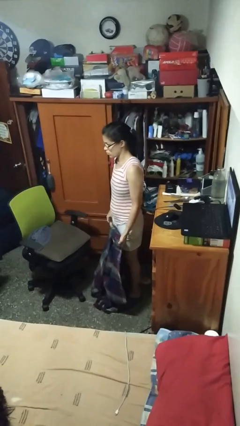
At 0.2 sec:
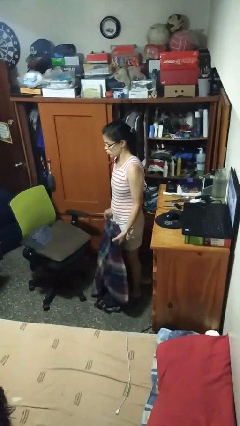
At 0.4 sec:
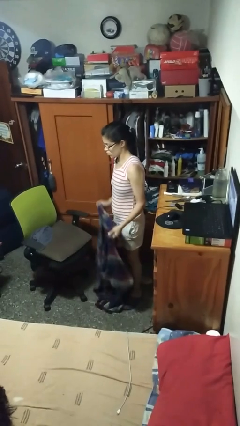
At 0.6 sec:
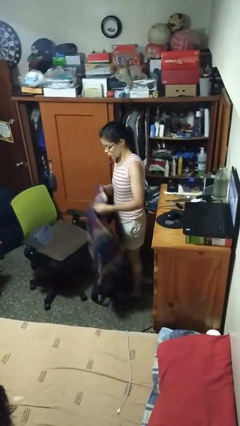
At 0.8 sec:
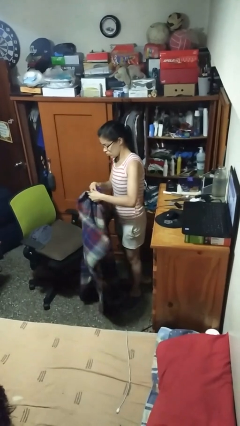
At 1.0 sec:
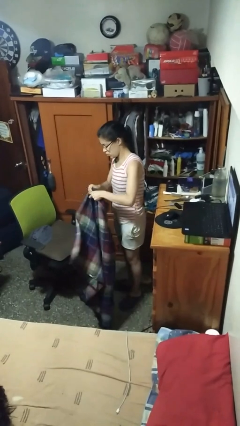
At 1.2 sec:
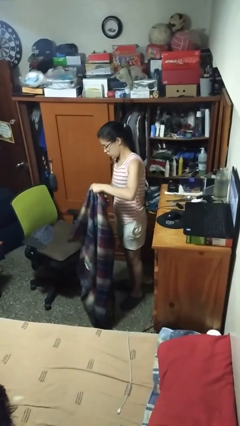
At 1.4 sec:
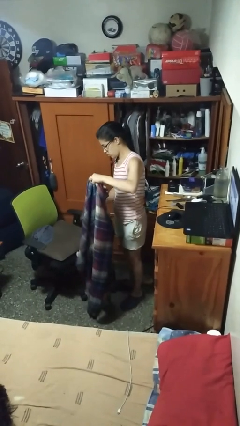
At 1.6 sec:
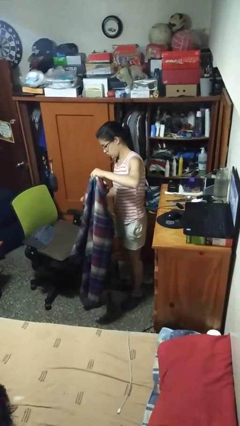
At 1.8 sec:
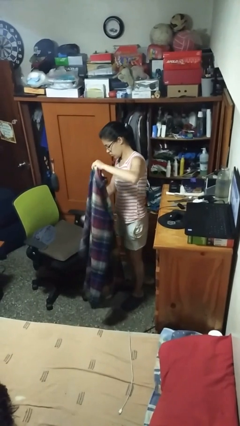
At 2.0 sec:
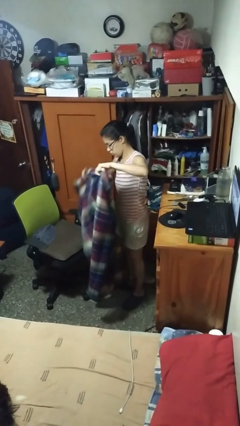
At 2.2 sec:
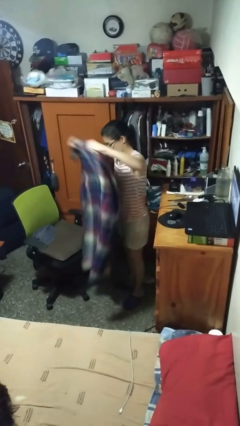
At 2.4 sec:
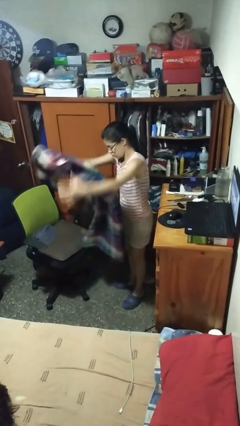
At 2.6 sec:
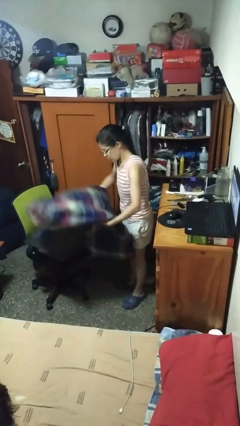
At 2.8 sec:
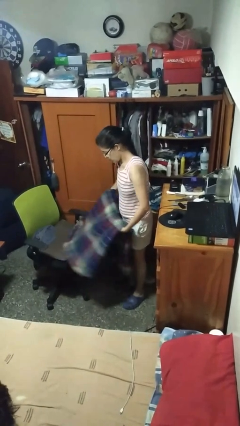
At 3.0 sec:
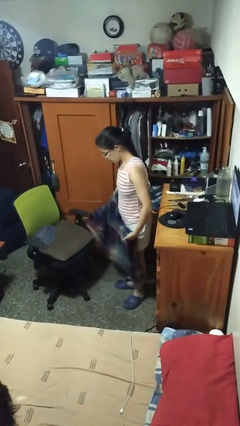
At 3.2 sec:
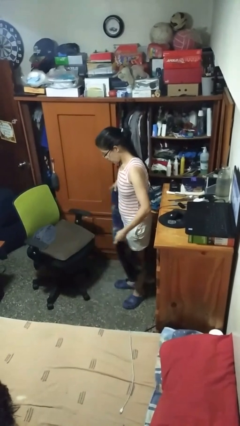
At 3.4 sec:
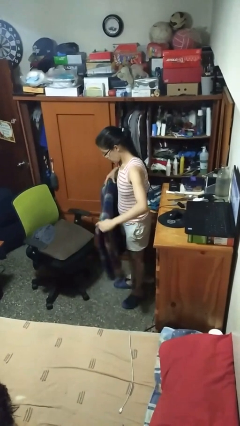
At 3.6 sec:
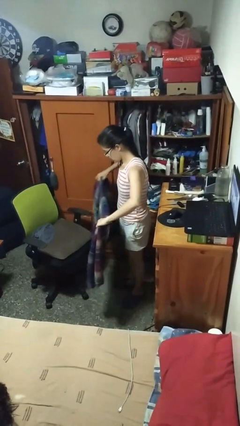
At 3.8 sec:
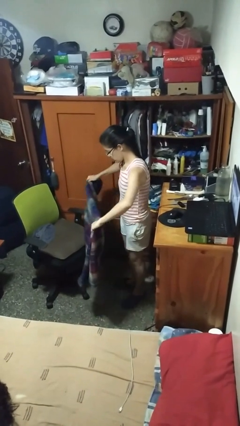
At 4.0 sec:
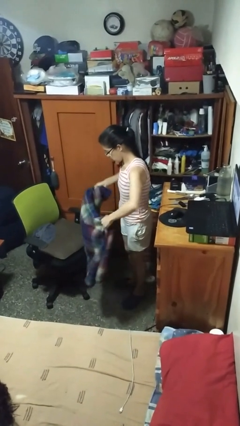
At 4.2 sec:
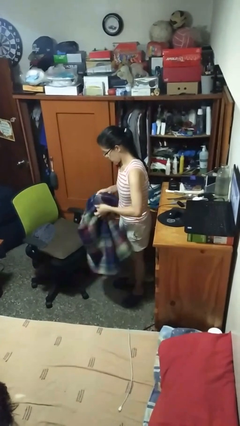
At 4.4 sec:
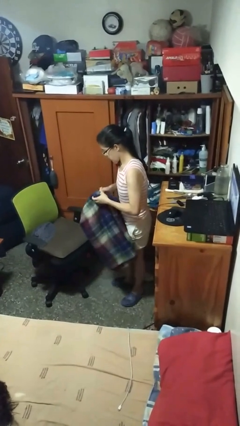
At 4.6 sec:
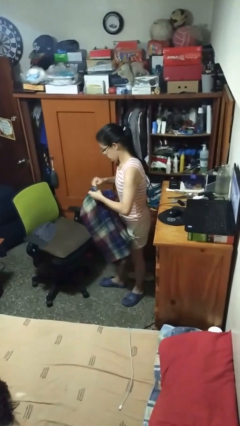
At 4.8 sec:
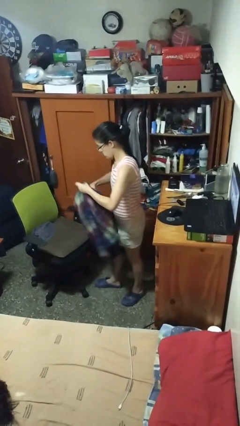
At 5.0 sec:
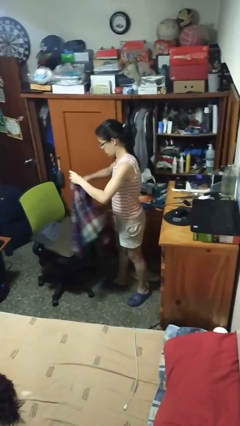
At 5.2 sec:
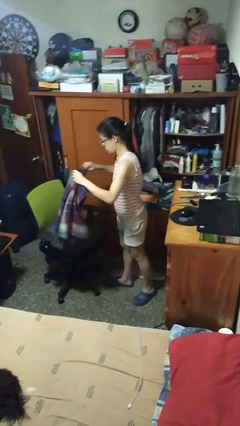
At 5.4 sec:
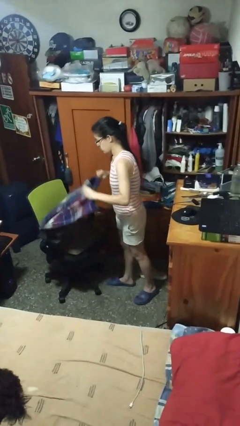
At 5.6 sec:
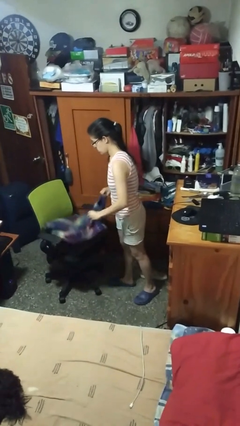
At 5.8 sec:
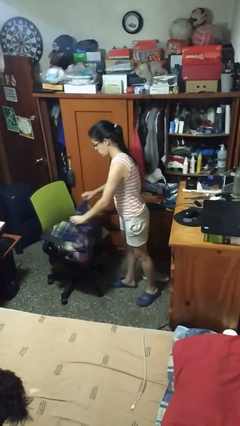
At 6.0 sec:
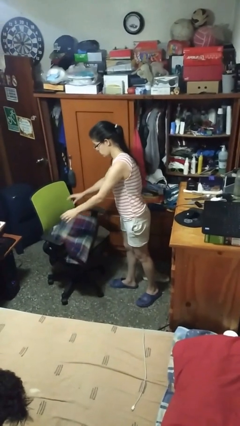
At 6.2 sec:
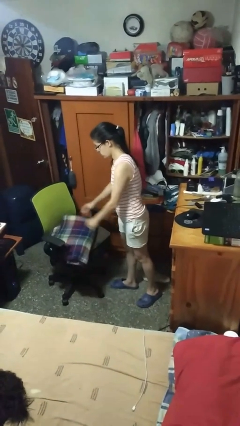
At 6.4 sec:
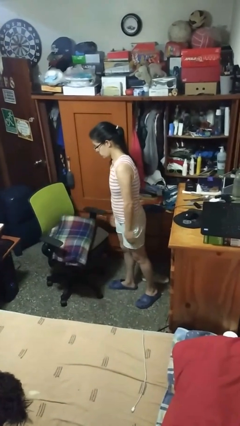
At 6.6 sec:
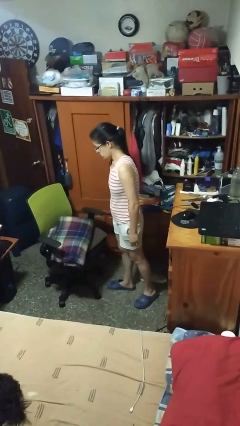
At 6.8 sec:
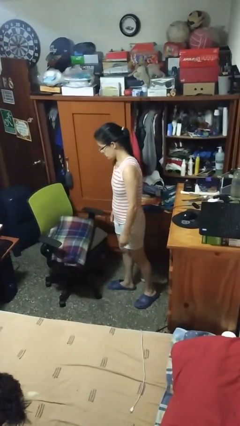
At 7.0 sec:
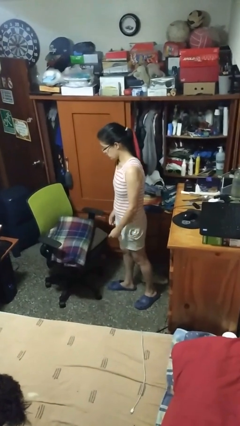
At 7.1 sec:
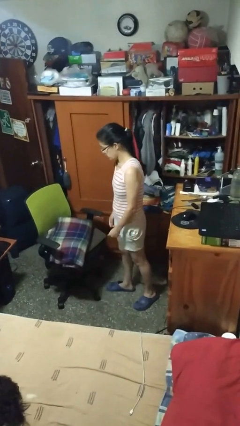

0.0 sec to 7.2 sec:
person folds blanket

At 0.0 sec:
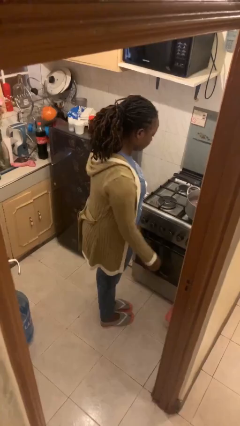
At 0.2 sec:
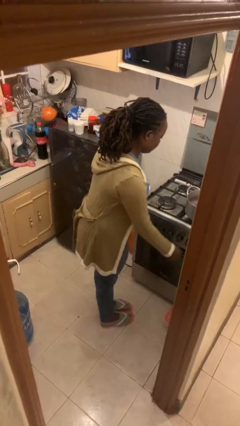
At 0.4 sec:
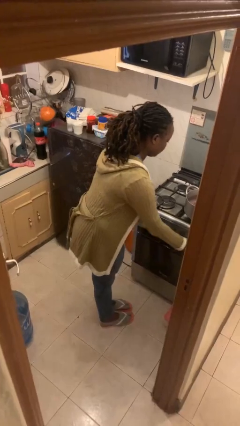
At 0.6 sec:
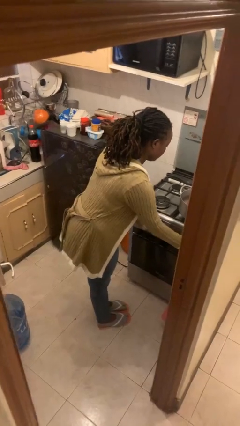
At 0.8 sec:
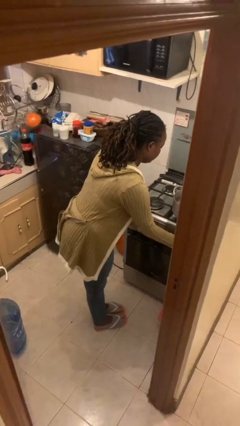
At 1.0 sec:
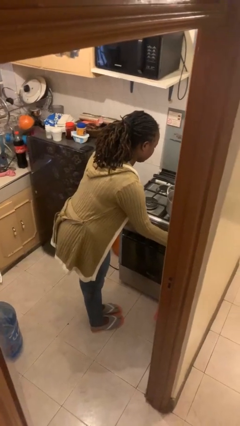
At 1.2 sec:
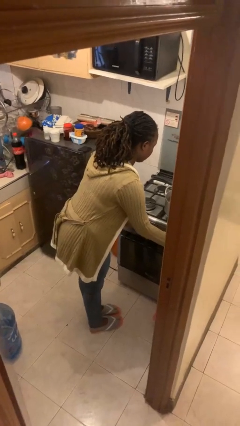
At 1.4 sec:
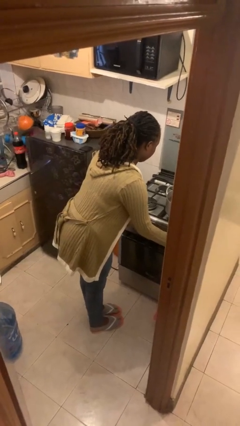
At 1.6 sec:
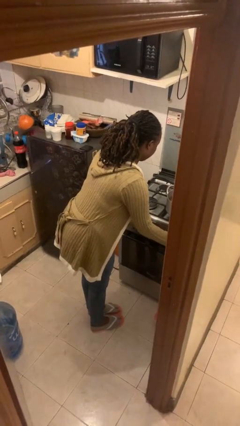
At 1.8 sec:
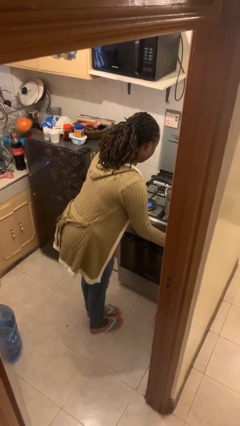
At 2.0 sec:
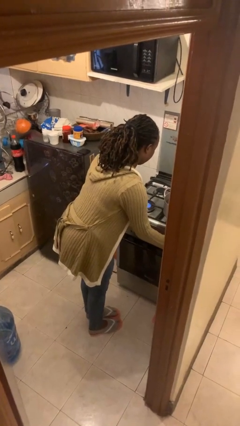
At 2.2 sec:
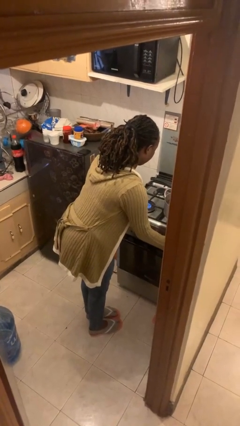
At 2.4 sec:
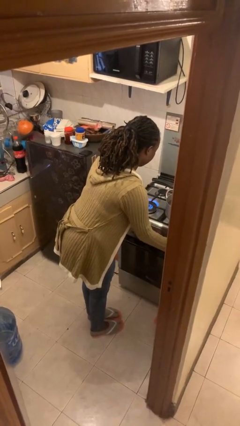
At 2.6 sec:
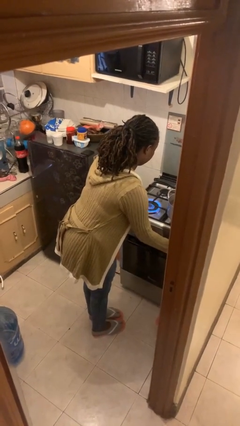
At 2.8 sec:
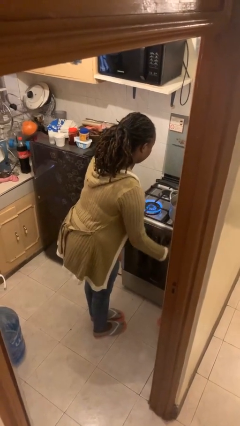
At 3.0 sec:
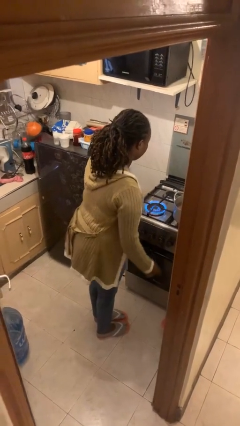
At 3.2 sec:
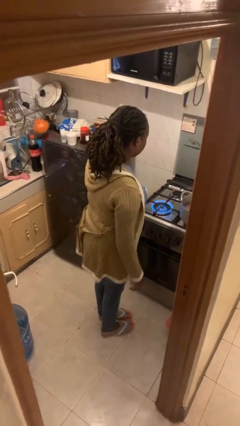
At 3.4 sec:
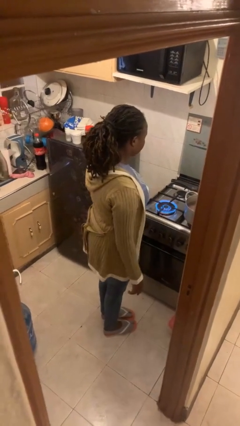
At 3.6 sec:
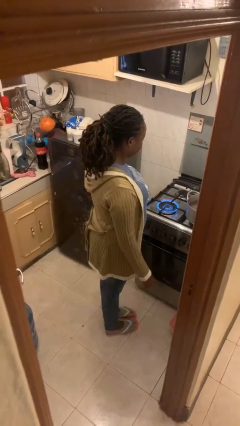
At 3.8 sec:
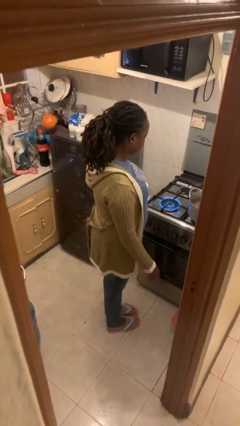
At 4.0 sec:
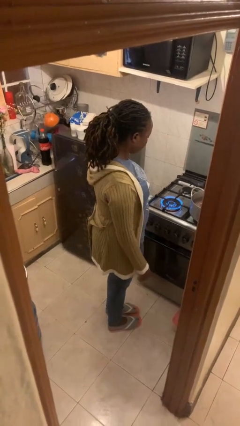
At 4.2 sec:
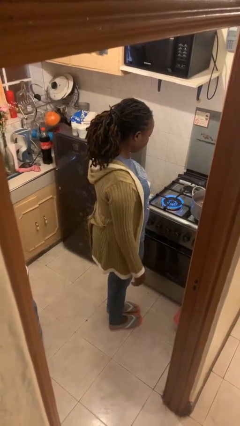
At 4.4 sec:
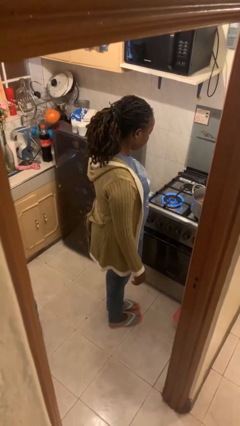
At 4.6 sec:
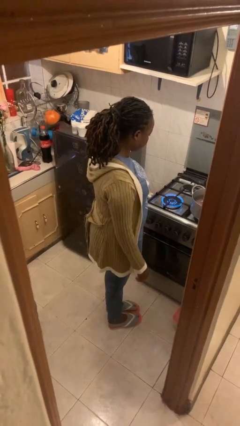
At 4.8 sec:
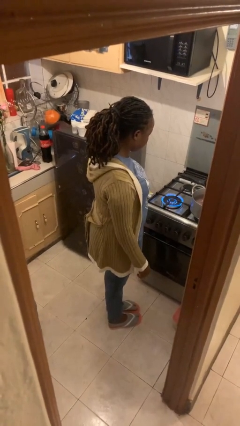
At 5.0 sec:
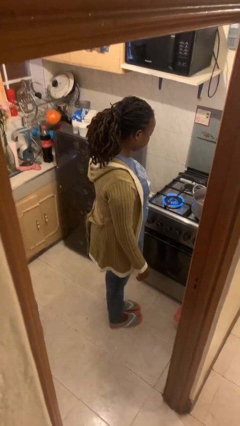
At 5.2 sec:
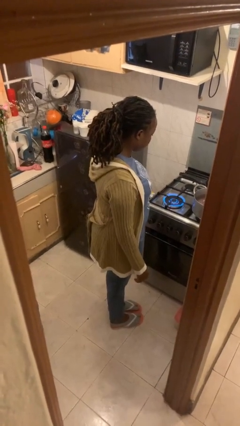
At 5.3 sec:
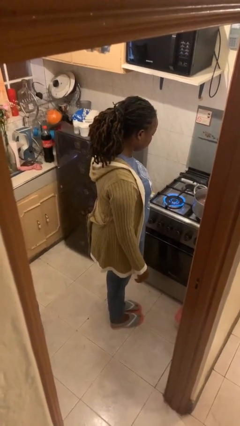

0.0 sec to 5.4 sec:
person turns on stovetop

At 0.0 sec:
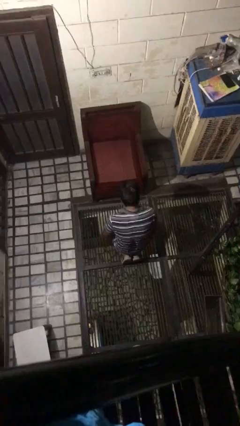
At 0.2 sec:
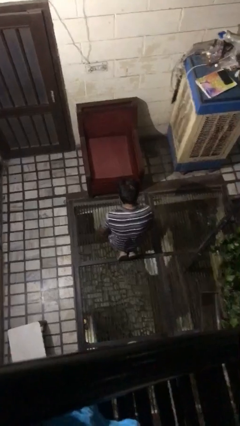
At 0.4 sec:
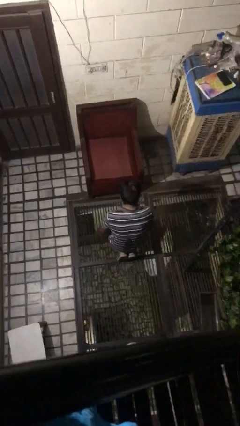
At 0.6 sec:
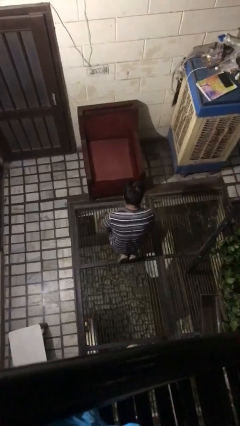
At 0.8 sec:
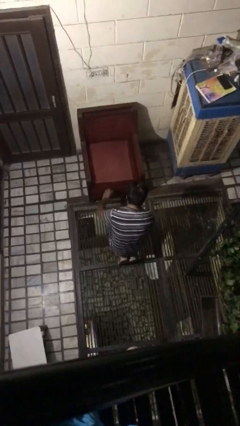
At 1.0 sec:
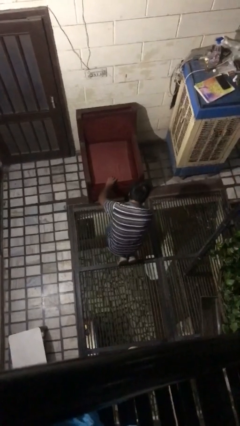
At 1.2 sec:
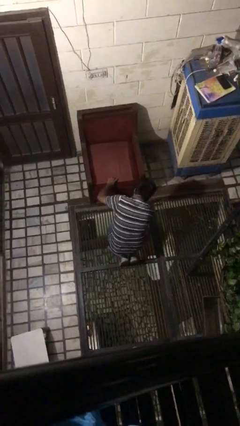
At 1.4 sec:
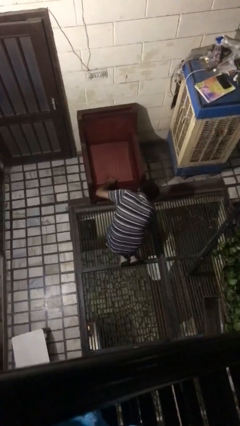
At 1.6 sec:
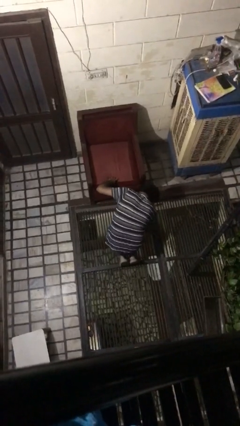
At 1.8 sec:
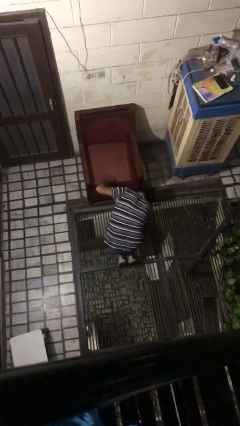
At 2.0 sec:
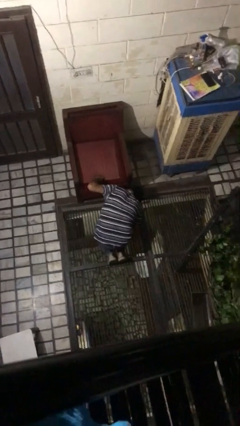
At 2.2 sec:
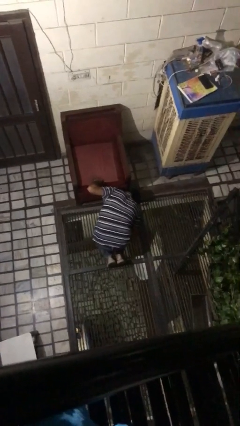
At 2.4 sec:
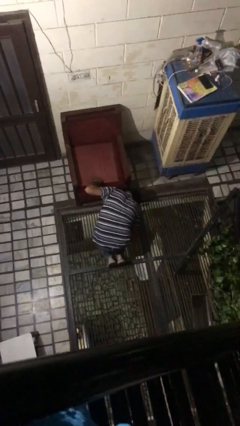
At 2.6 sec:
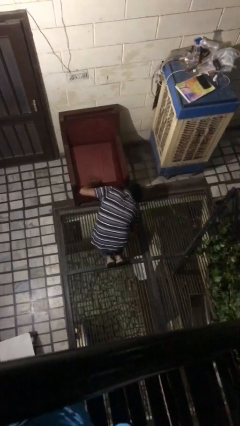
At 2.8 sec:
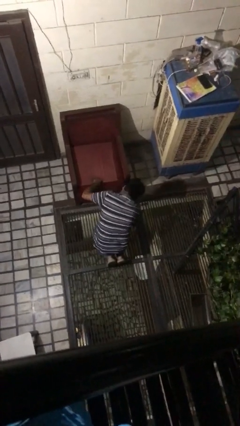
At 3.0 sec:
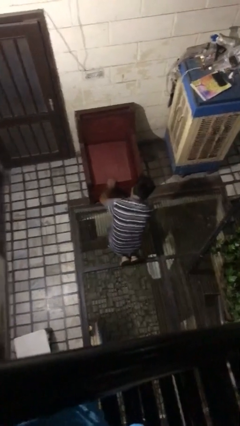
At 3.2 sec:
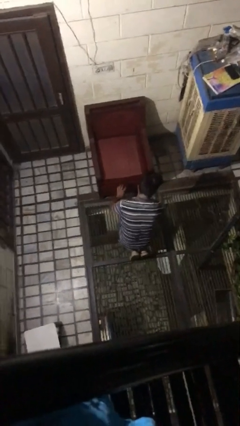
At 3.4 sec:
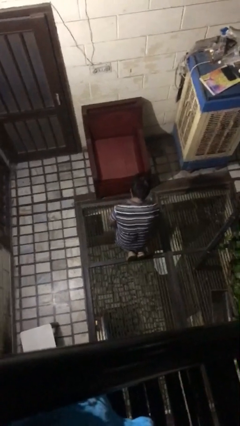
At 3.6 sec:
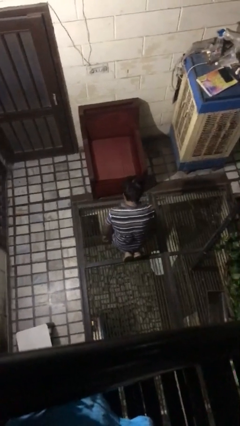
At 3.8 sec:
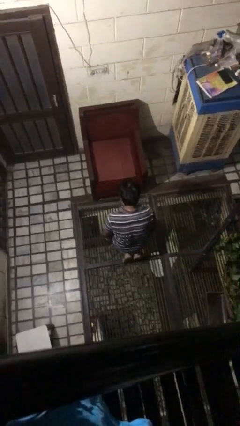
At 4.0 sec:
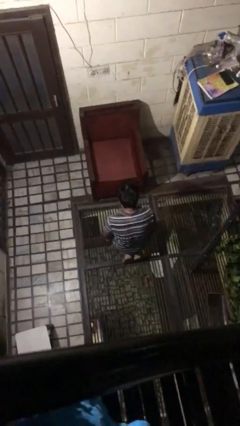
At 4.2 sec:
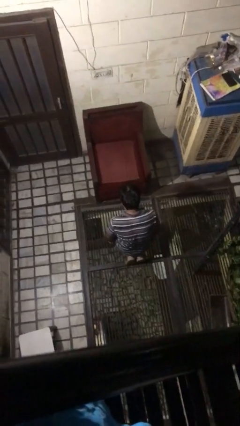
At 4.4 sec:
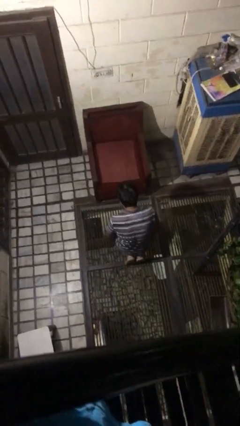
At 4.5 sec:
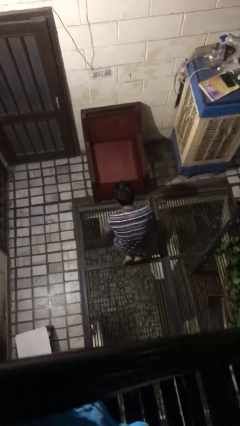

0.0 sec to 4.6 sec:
person searches under couch
